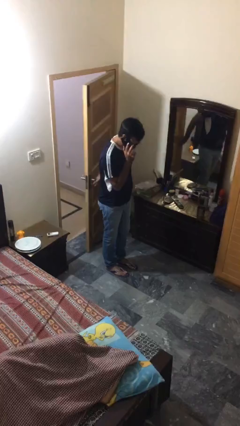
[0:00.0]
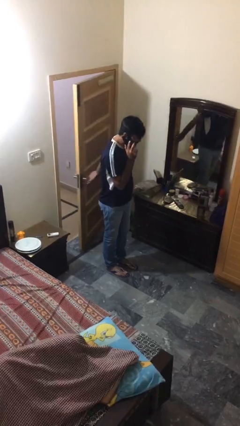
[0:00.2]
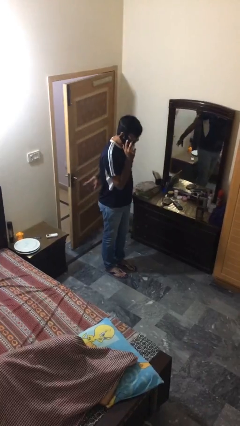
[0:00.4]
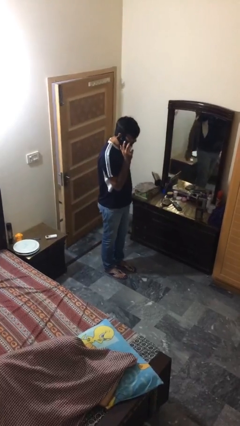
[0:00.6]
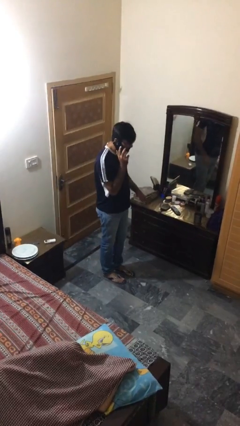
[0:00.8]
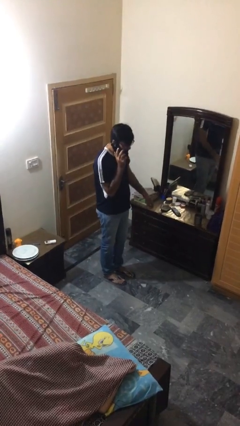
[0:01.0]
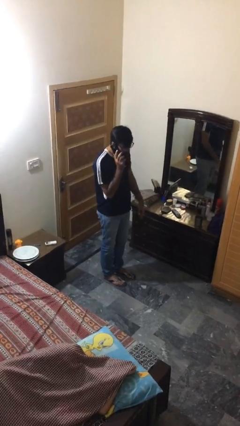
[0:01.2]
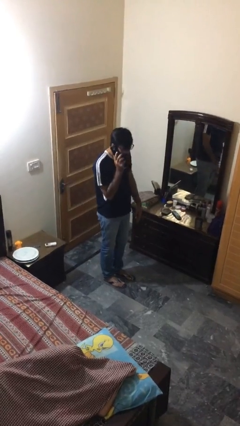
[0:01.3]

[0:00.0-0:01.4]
person closes facility door

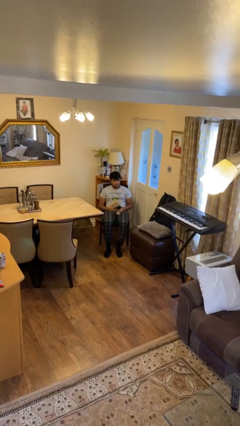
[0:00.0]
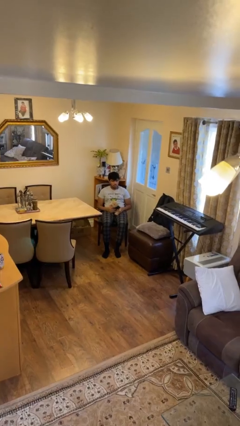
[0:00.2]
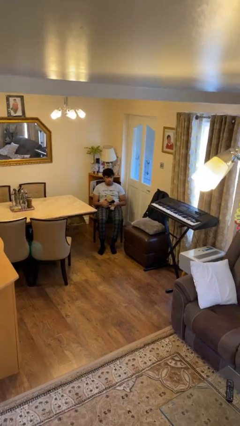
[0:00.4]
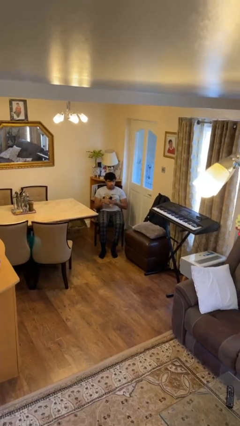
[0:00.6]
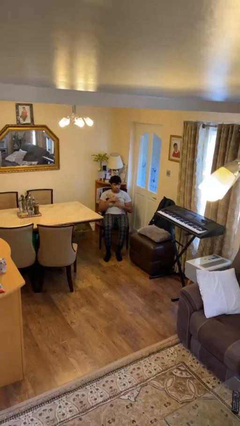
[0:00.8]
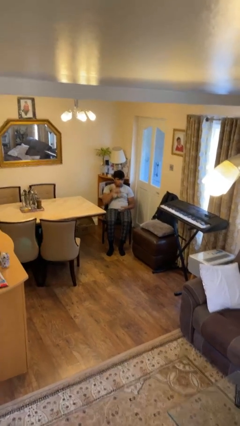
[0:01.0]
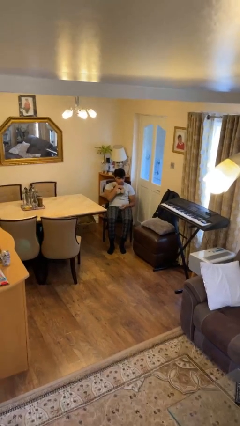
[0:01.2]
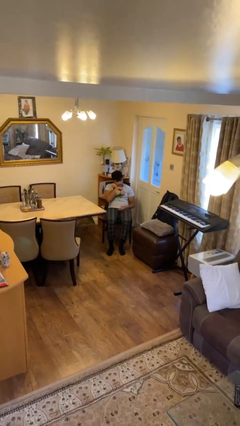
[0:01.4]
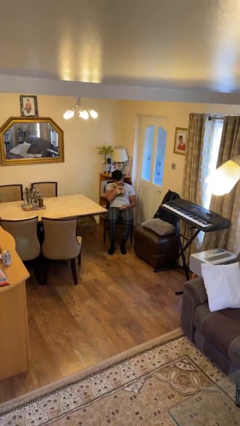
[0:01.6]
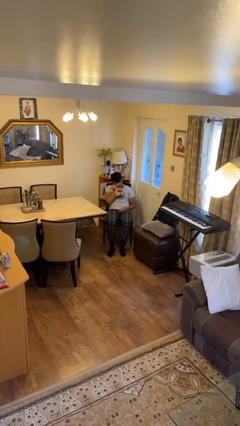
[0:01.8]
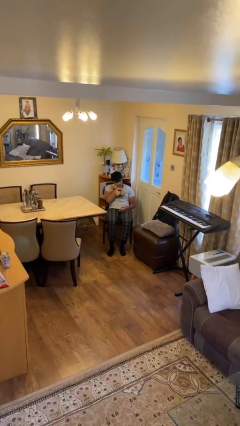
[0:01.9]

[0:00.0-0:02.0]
person hugs stuffed animal

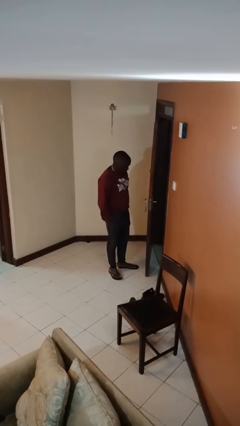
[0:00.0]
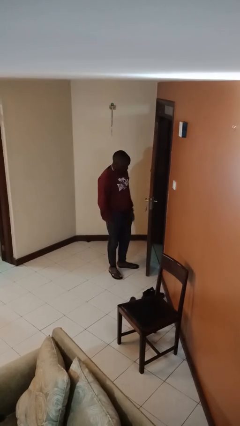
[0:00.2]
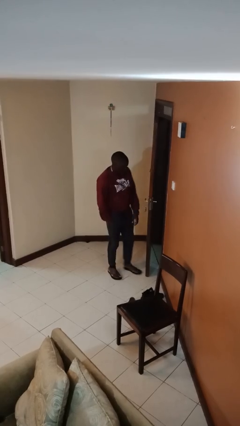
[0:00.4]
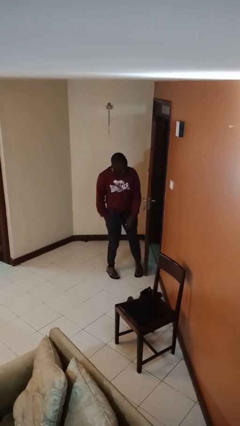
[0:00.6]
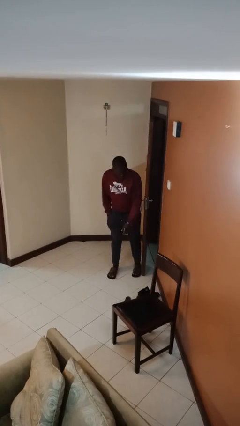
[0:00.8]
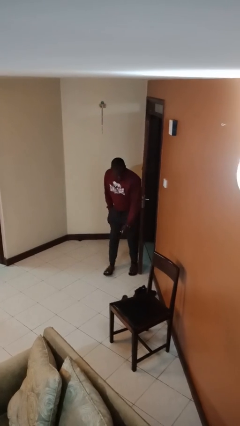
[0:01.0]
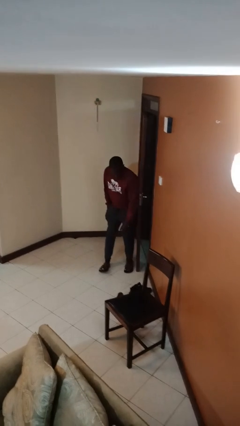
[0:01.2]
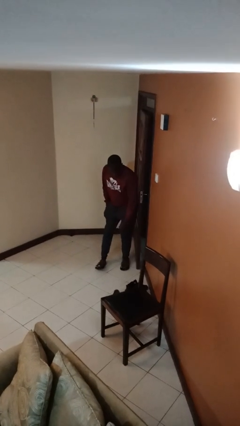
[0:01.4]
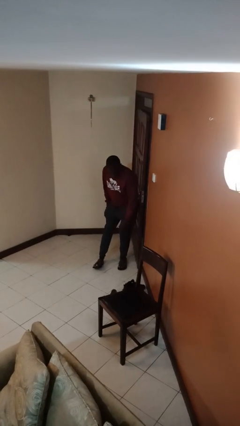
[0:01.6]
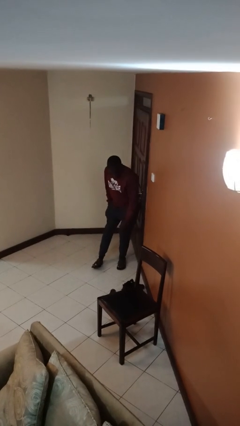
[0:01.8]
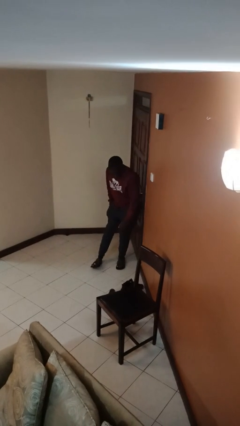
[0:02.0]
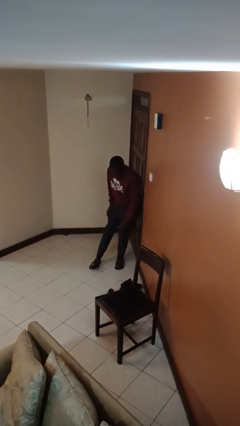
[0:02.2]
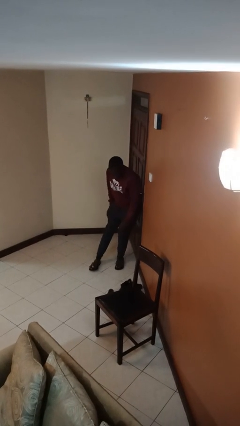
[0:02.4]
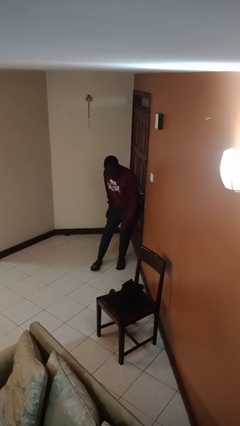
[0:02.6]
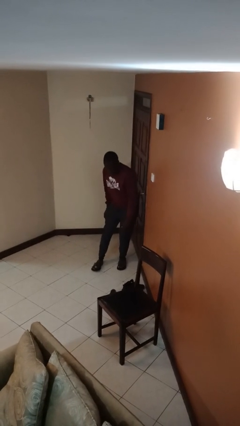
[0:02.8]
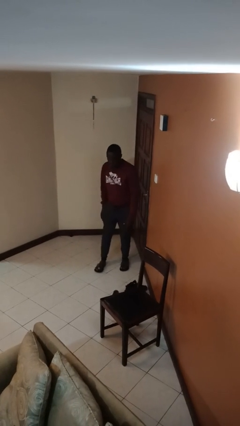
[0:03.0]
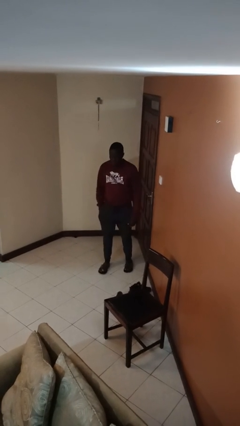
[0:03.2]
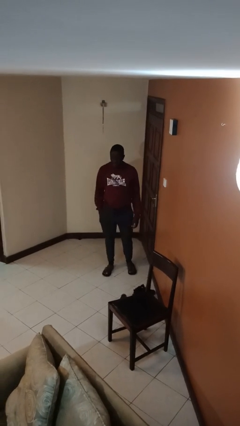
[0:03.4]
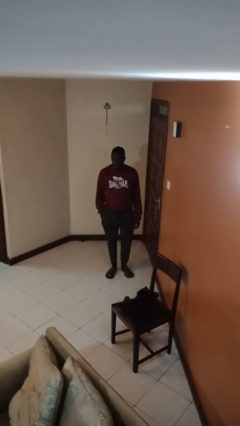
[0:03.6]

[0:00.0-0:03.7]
person closes door with hip

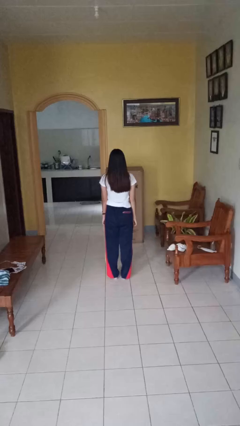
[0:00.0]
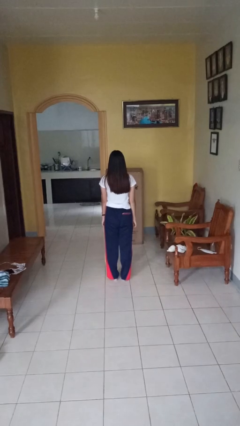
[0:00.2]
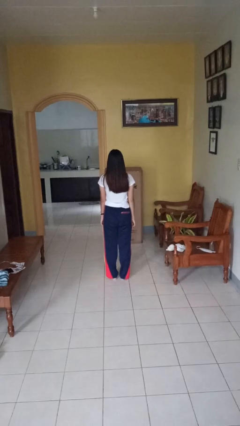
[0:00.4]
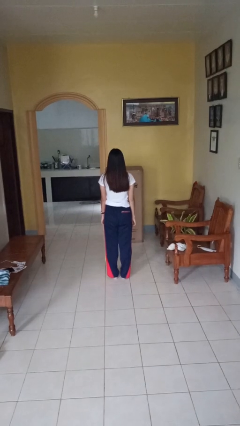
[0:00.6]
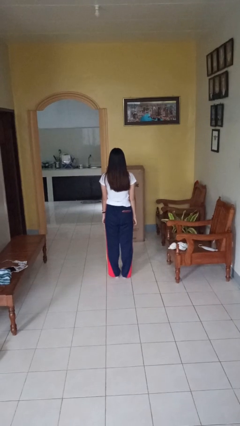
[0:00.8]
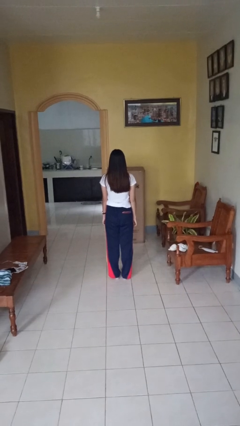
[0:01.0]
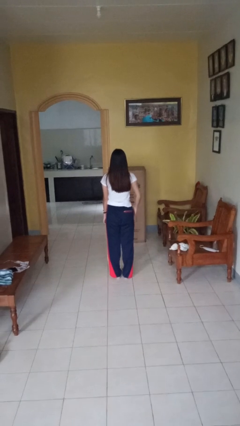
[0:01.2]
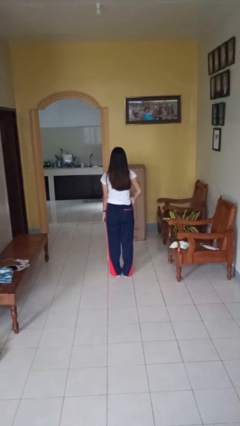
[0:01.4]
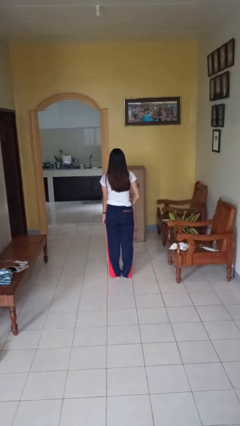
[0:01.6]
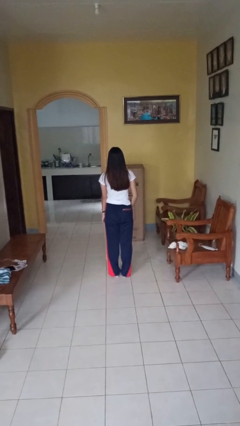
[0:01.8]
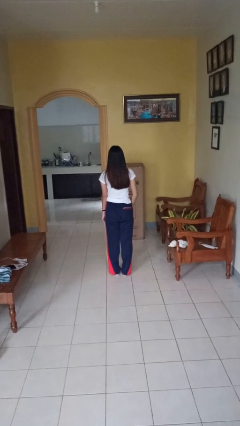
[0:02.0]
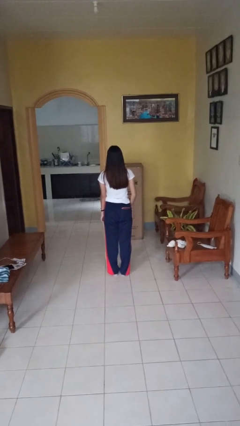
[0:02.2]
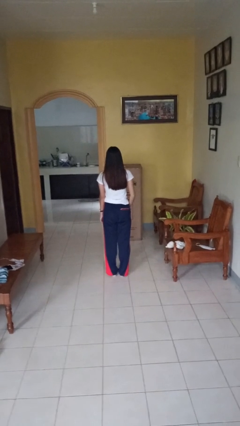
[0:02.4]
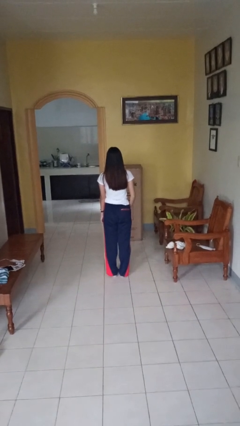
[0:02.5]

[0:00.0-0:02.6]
person puts hands in back pockets

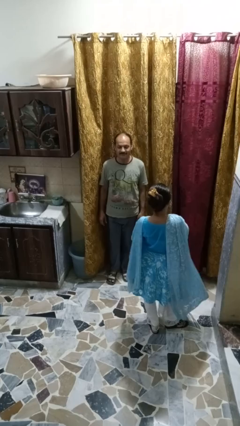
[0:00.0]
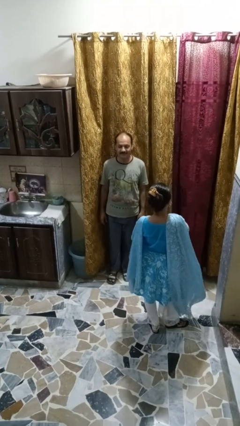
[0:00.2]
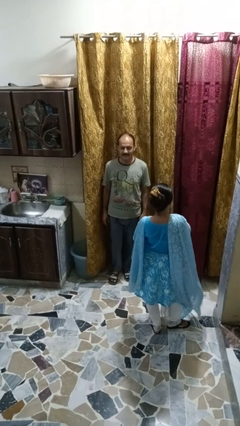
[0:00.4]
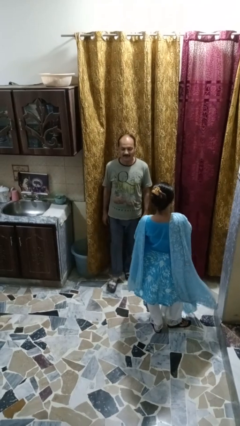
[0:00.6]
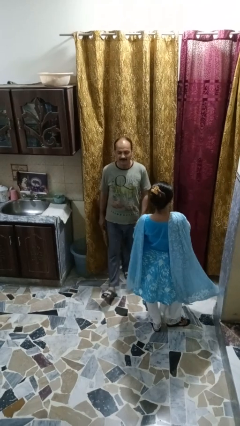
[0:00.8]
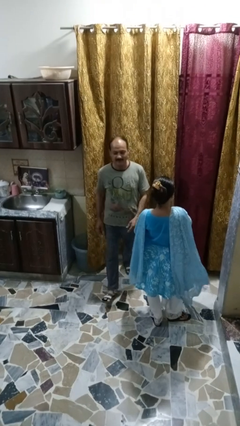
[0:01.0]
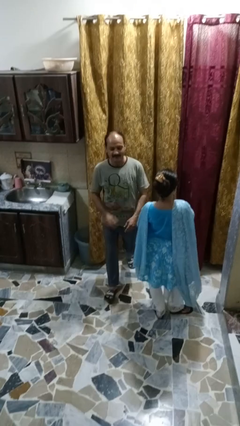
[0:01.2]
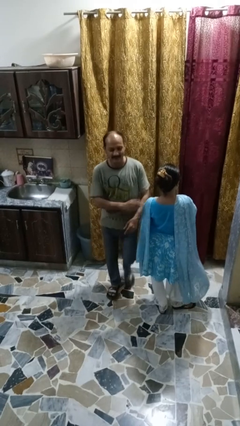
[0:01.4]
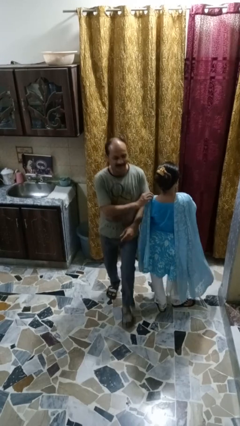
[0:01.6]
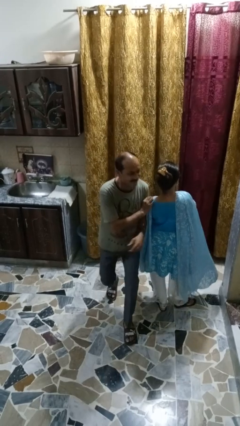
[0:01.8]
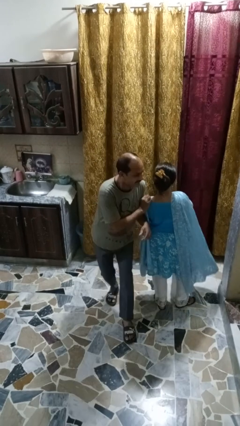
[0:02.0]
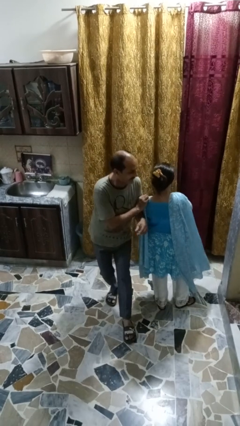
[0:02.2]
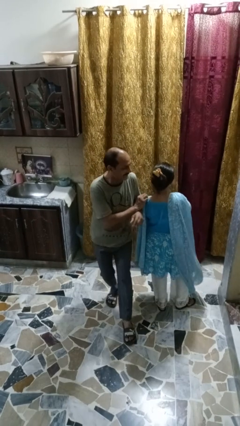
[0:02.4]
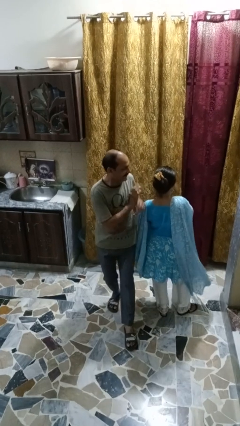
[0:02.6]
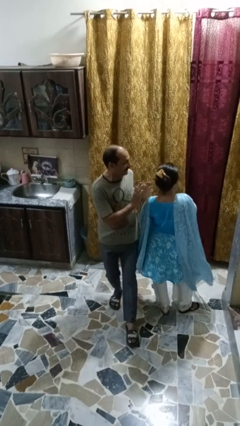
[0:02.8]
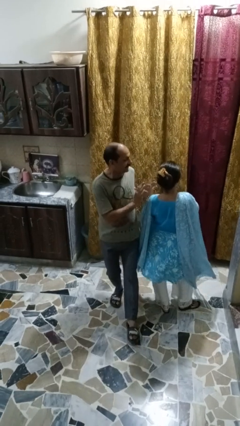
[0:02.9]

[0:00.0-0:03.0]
person bumps into person

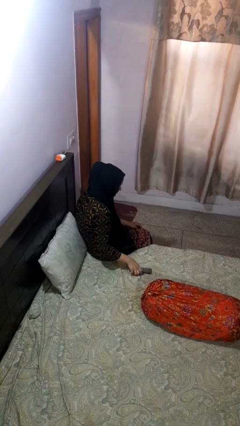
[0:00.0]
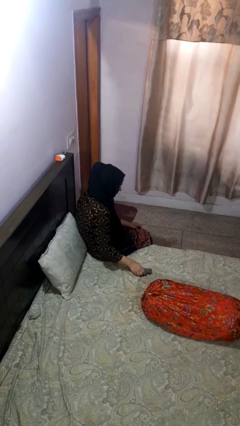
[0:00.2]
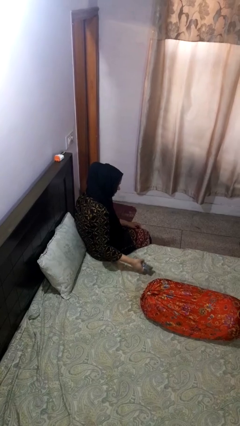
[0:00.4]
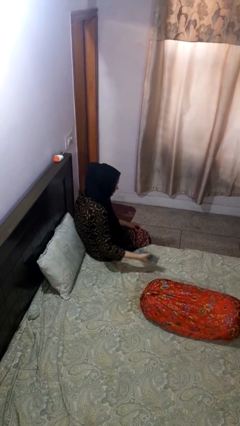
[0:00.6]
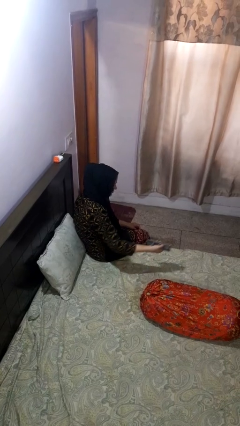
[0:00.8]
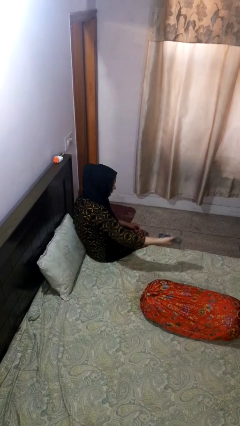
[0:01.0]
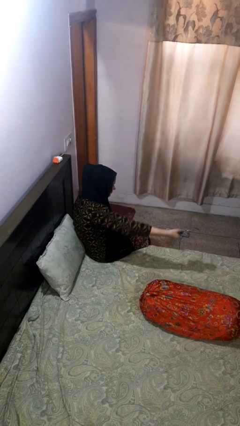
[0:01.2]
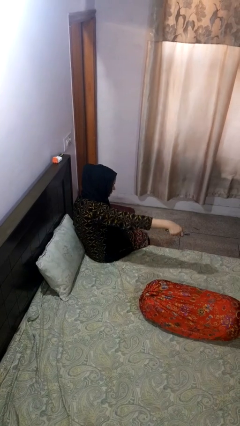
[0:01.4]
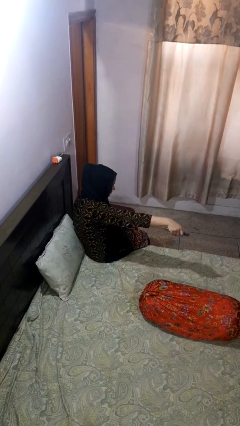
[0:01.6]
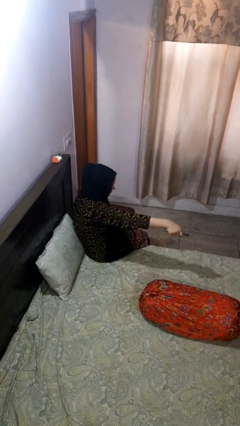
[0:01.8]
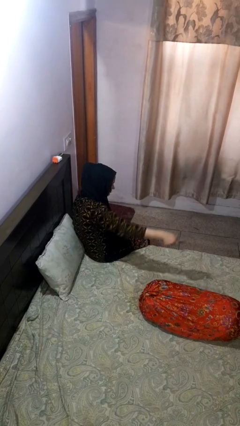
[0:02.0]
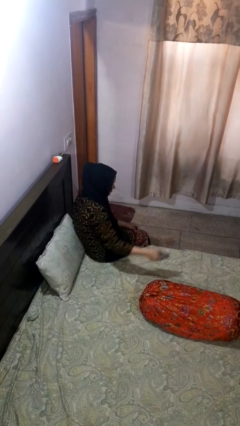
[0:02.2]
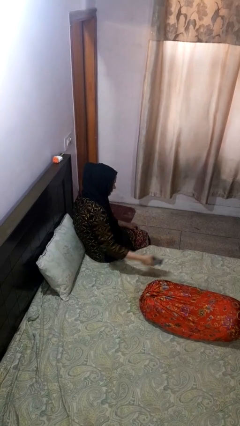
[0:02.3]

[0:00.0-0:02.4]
person uses television remote

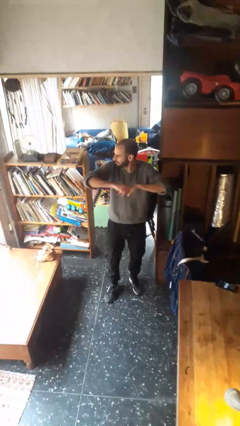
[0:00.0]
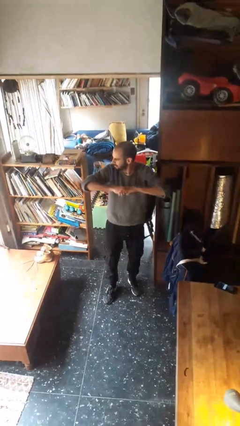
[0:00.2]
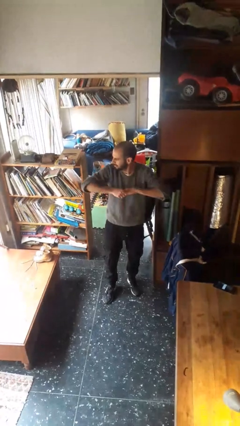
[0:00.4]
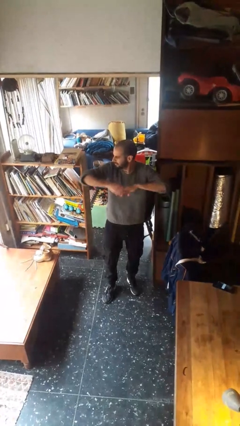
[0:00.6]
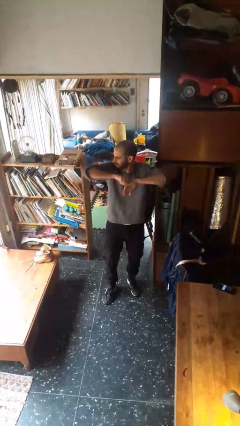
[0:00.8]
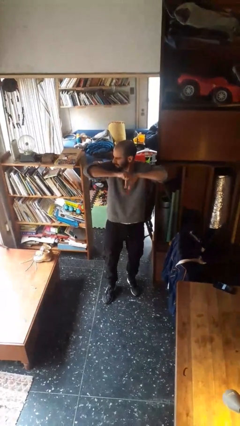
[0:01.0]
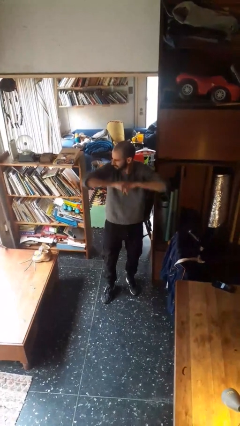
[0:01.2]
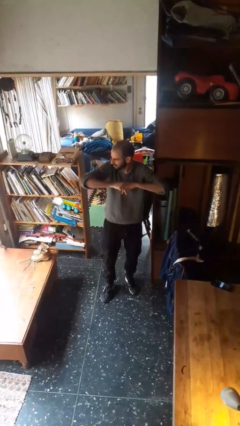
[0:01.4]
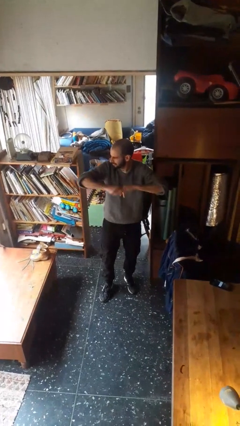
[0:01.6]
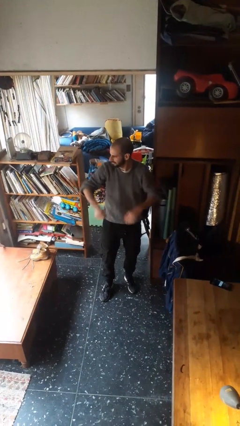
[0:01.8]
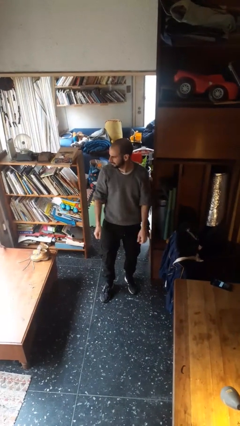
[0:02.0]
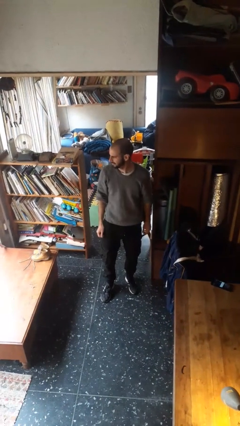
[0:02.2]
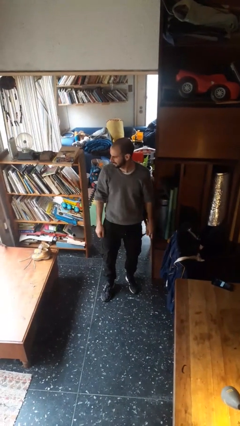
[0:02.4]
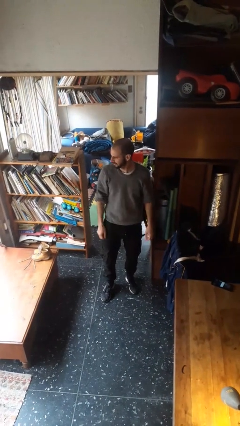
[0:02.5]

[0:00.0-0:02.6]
person cracks knuckles
